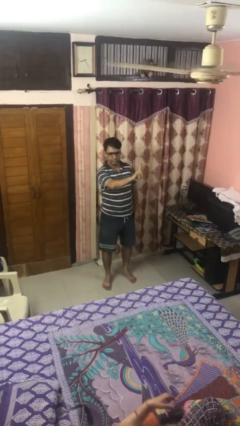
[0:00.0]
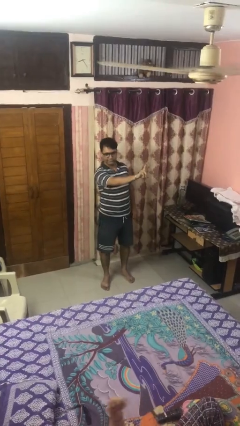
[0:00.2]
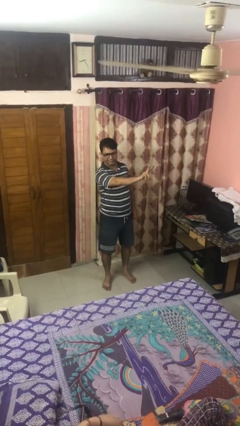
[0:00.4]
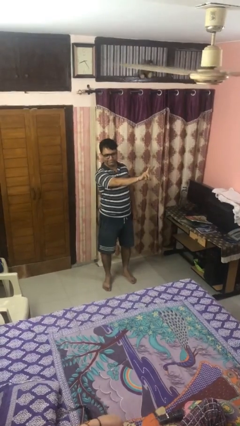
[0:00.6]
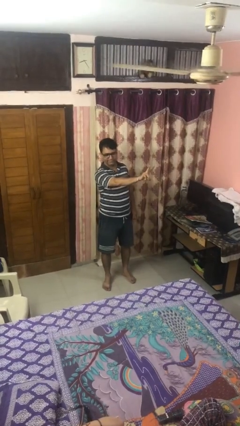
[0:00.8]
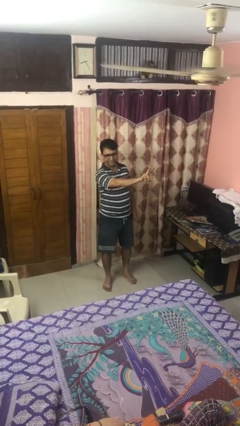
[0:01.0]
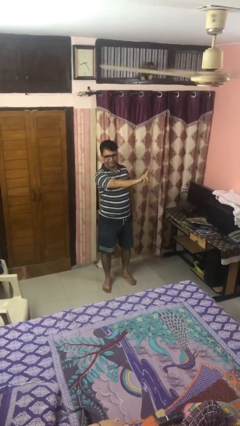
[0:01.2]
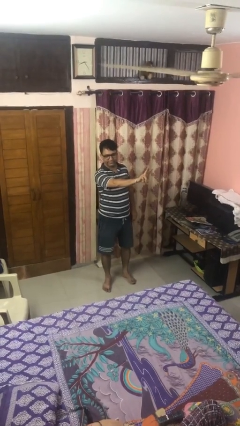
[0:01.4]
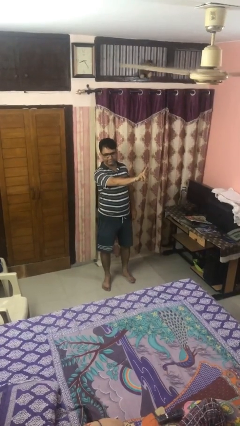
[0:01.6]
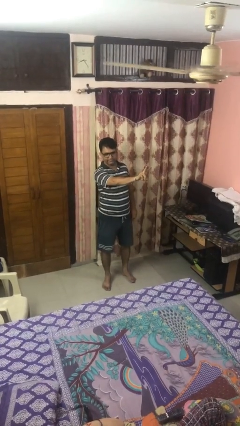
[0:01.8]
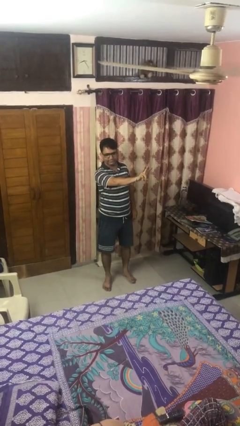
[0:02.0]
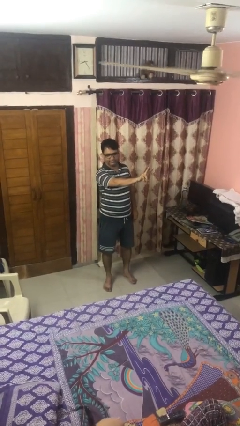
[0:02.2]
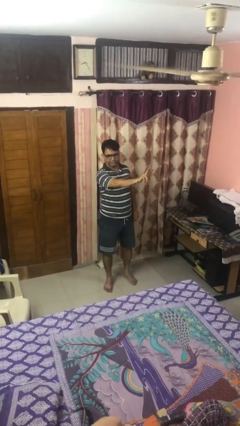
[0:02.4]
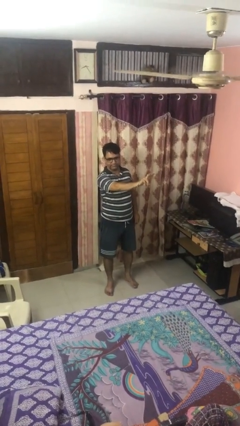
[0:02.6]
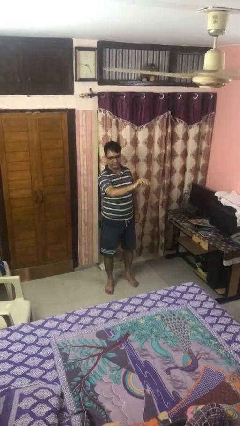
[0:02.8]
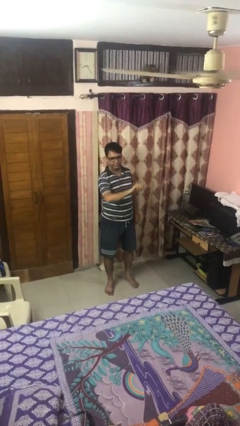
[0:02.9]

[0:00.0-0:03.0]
person gestures peace

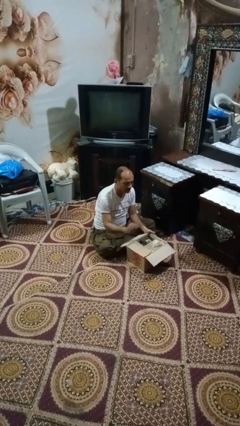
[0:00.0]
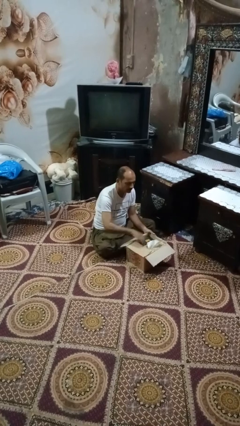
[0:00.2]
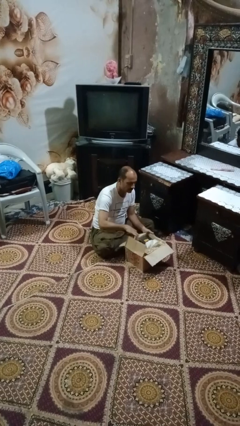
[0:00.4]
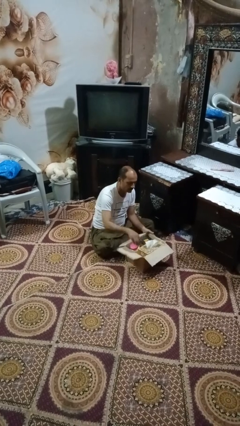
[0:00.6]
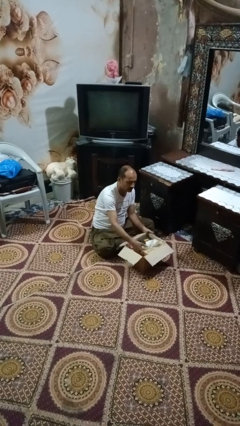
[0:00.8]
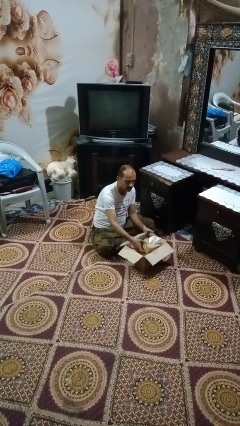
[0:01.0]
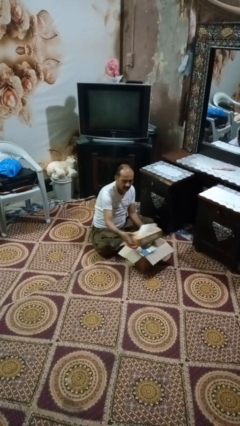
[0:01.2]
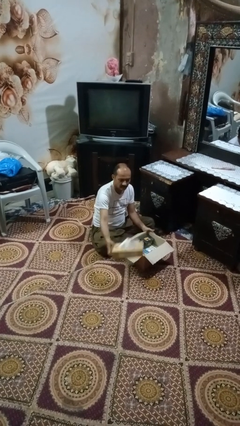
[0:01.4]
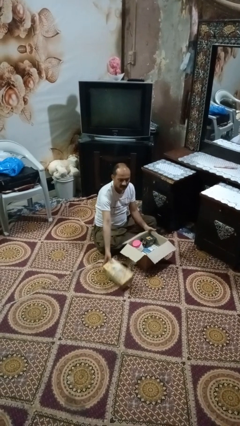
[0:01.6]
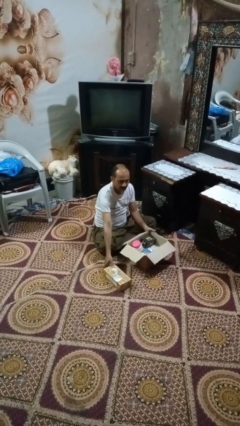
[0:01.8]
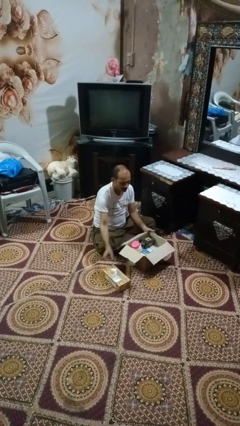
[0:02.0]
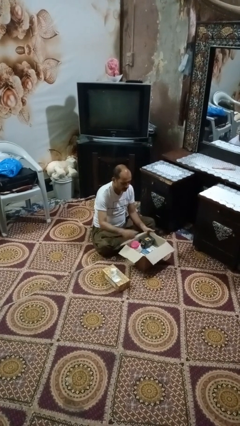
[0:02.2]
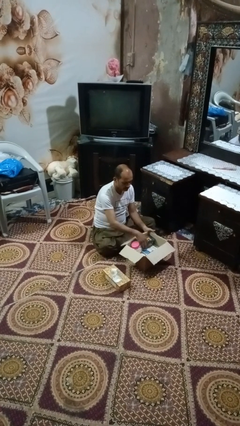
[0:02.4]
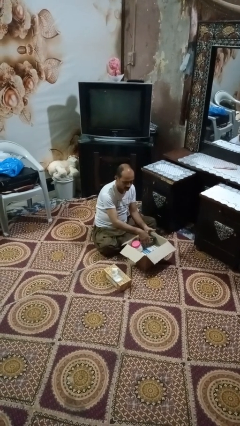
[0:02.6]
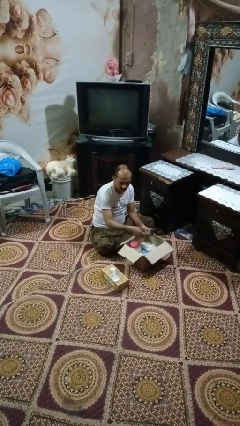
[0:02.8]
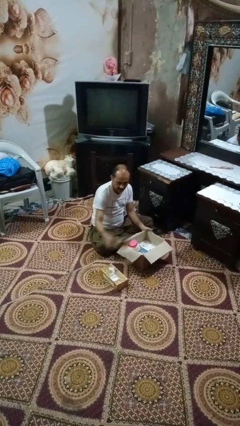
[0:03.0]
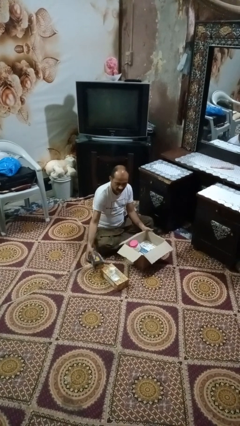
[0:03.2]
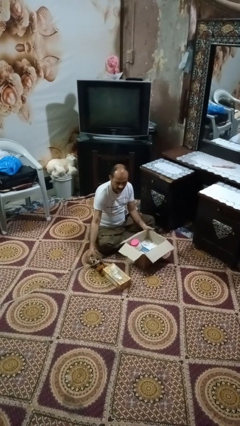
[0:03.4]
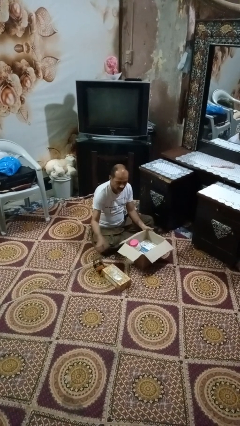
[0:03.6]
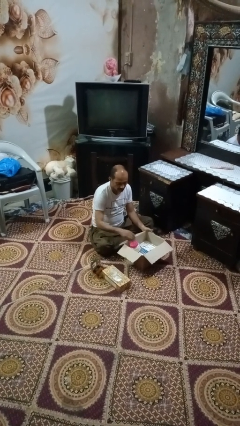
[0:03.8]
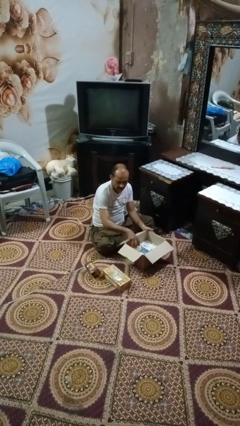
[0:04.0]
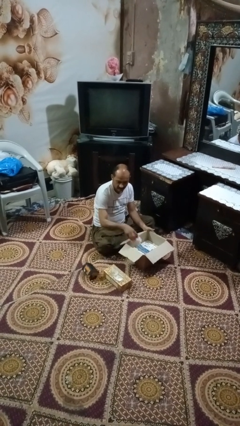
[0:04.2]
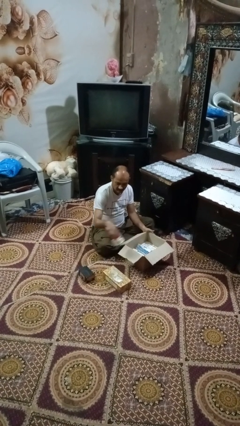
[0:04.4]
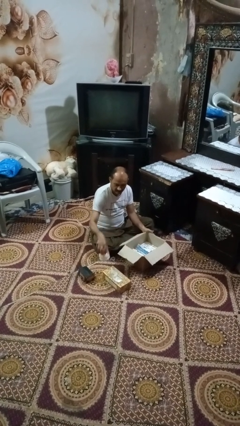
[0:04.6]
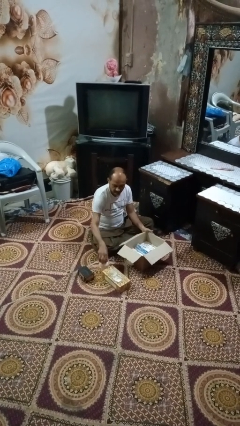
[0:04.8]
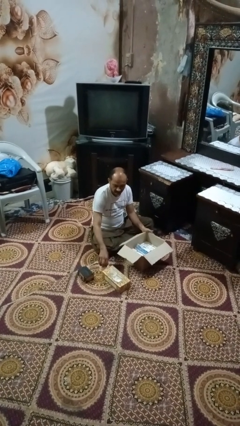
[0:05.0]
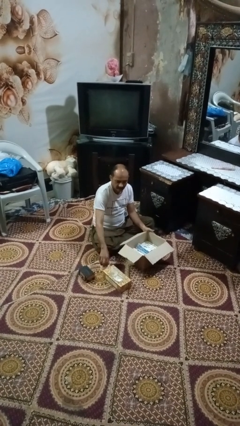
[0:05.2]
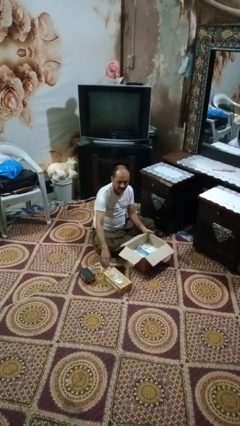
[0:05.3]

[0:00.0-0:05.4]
person takes object from box

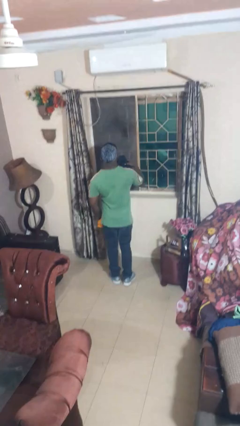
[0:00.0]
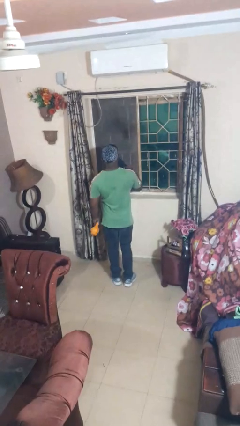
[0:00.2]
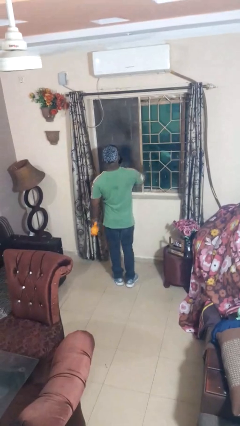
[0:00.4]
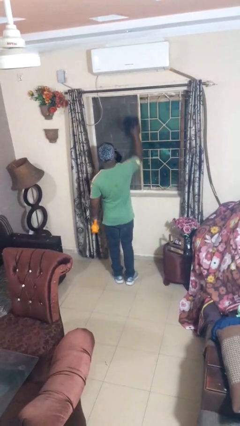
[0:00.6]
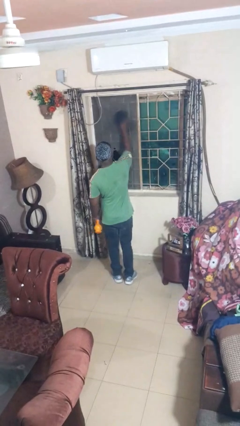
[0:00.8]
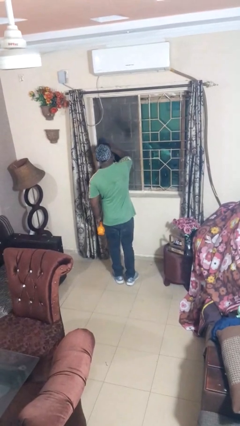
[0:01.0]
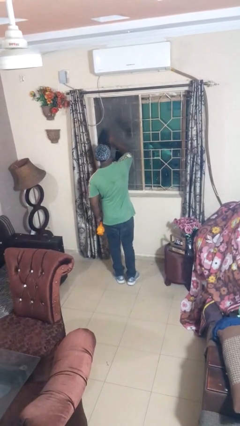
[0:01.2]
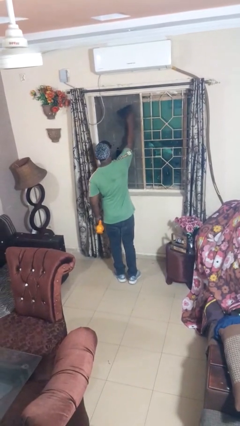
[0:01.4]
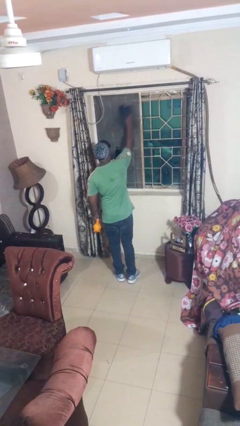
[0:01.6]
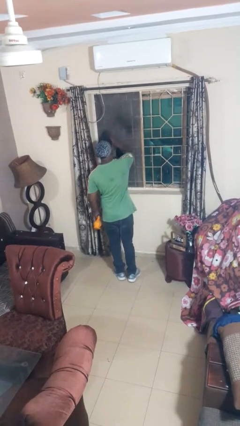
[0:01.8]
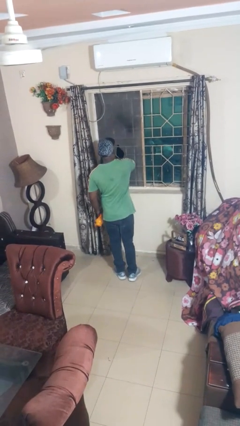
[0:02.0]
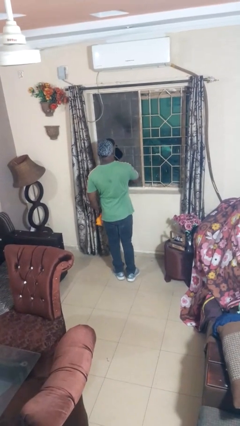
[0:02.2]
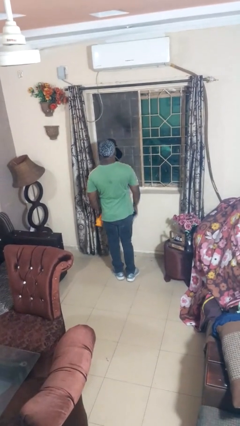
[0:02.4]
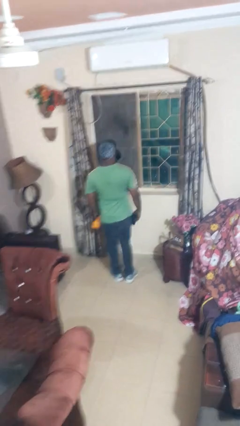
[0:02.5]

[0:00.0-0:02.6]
person washes window

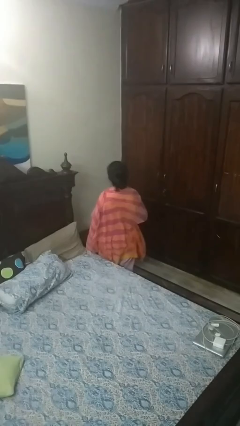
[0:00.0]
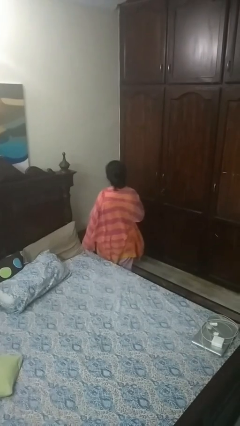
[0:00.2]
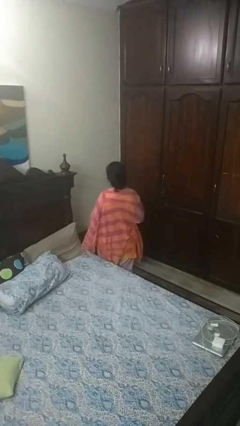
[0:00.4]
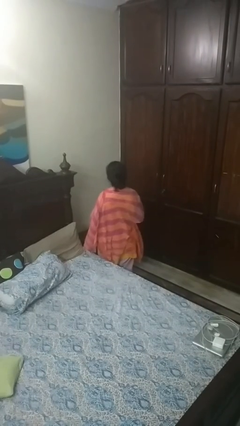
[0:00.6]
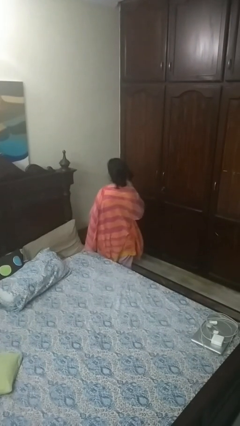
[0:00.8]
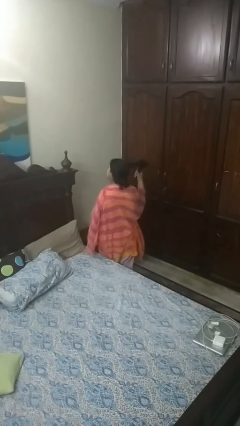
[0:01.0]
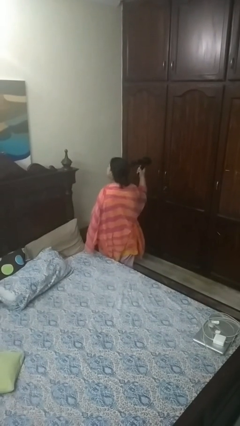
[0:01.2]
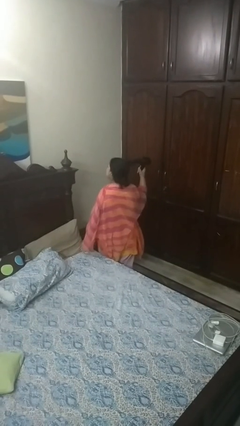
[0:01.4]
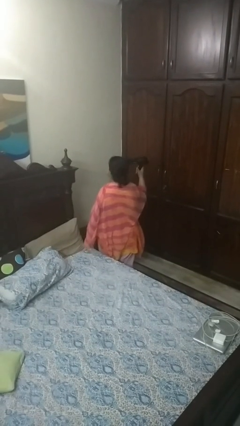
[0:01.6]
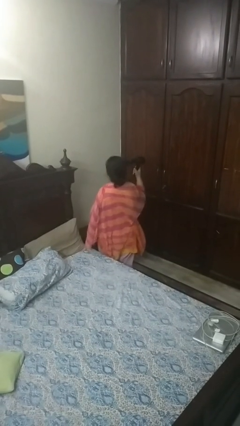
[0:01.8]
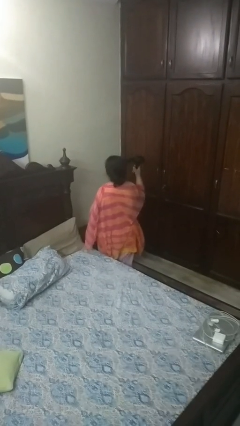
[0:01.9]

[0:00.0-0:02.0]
person dries hair with hairdryer

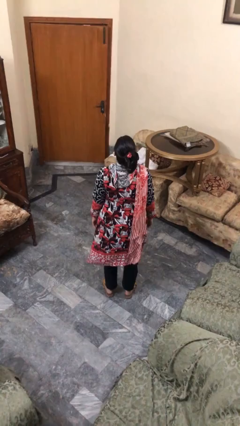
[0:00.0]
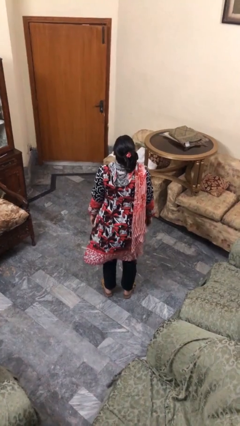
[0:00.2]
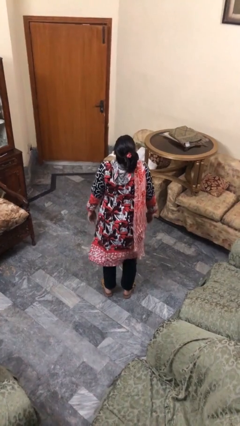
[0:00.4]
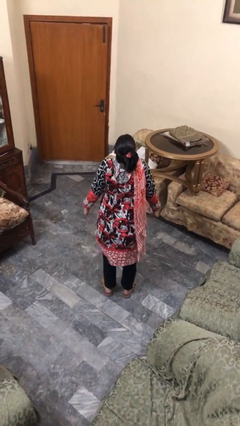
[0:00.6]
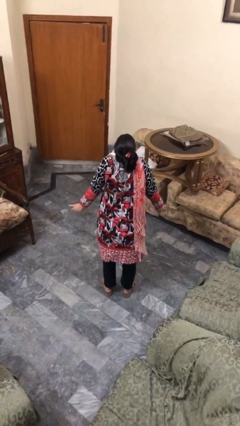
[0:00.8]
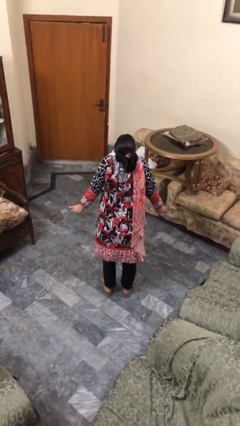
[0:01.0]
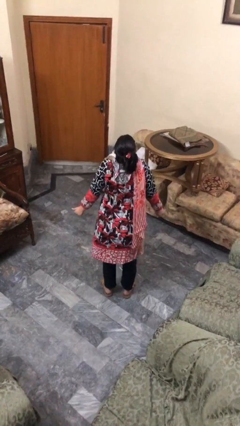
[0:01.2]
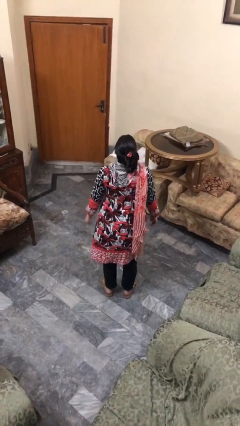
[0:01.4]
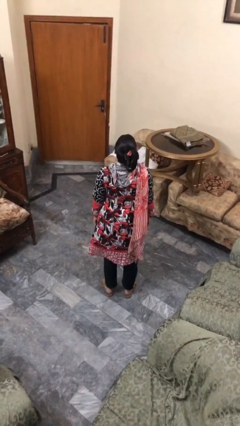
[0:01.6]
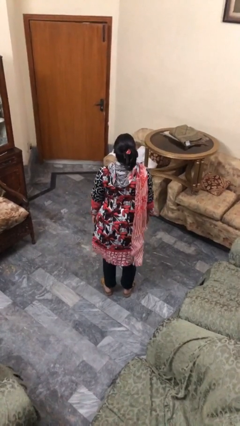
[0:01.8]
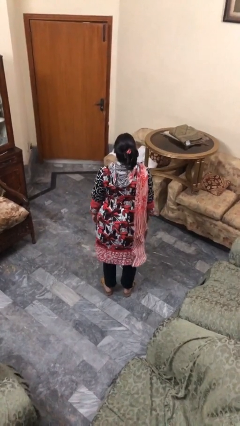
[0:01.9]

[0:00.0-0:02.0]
person shrugs

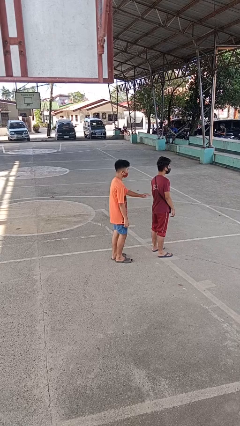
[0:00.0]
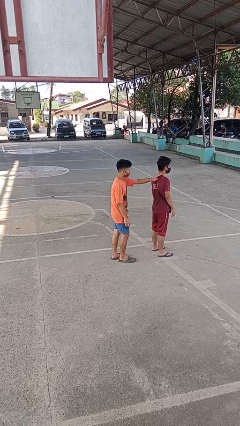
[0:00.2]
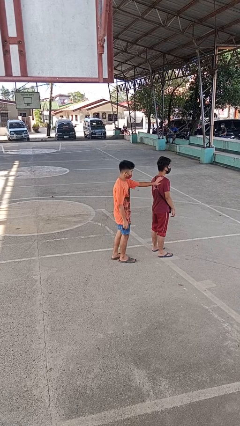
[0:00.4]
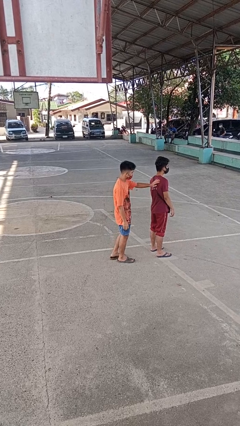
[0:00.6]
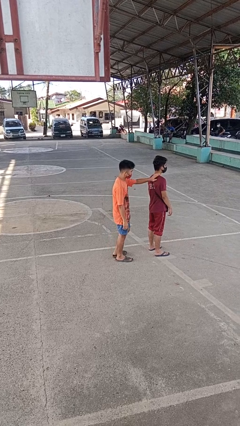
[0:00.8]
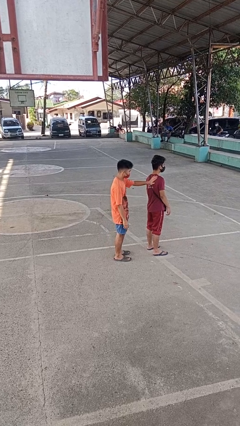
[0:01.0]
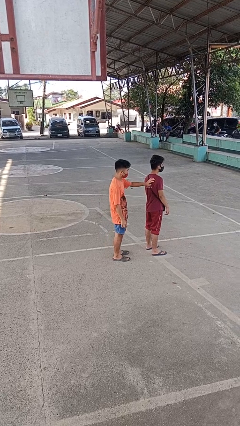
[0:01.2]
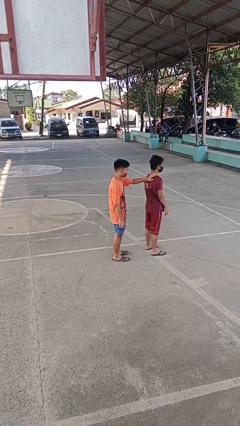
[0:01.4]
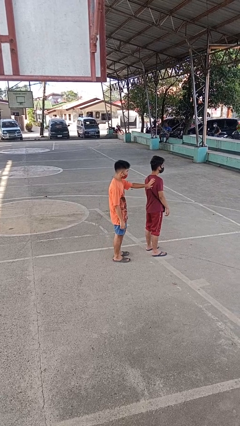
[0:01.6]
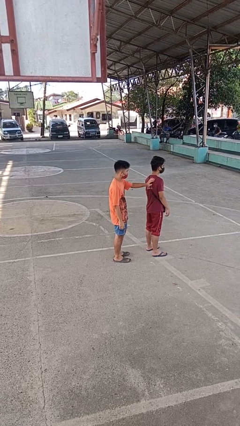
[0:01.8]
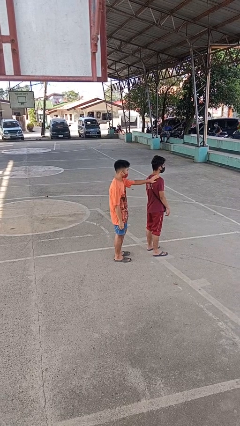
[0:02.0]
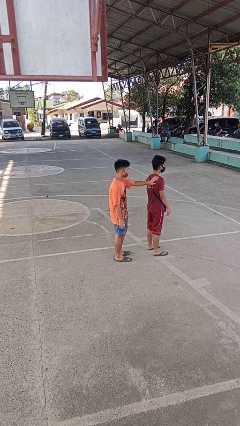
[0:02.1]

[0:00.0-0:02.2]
person touches back of person
